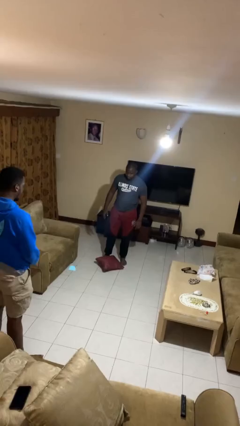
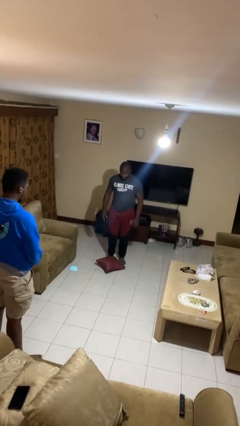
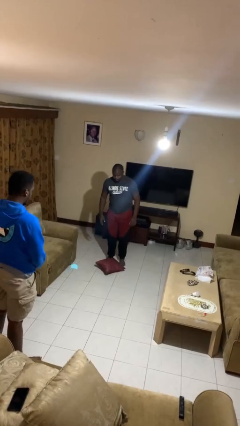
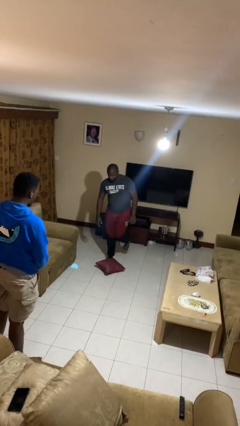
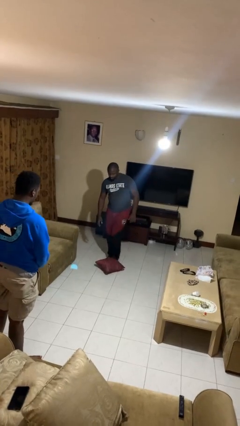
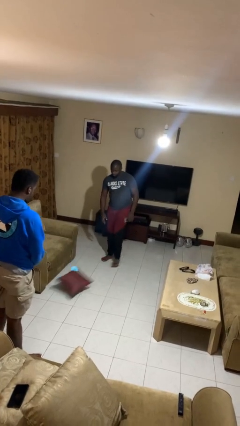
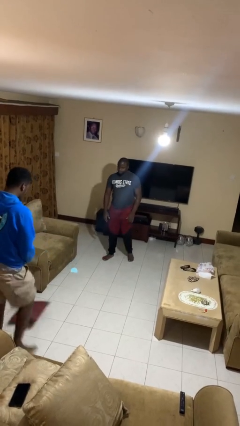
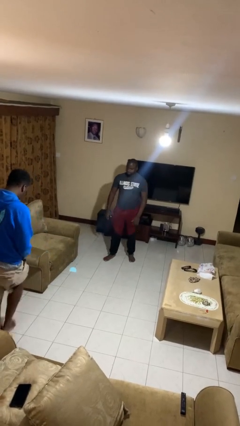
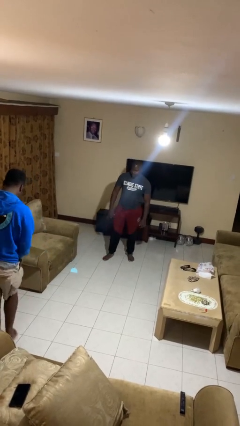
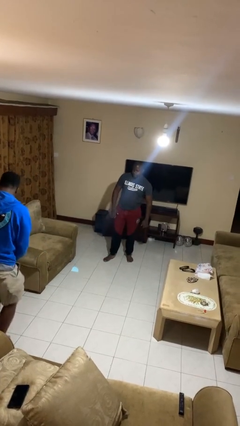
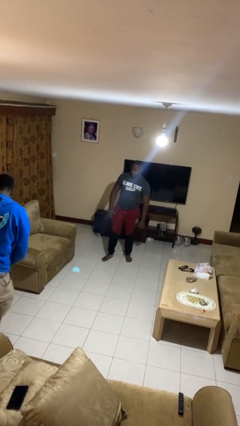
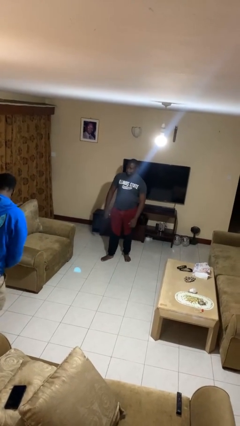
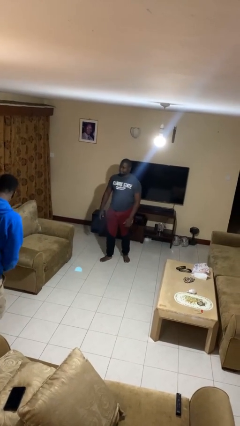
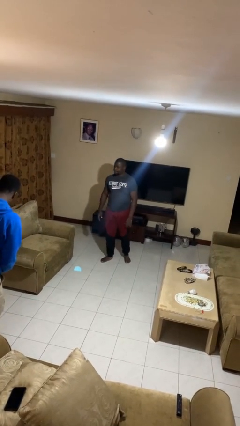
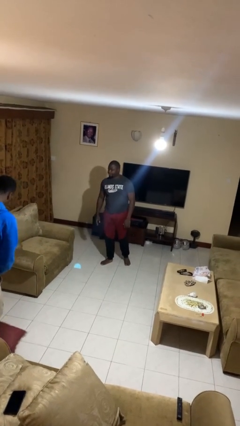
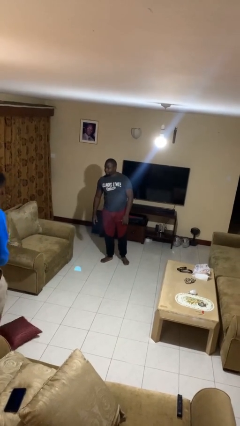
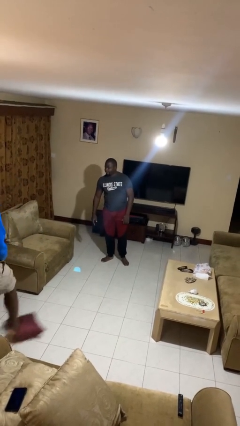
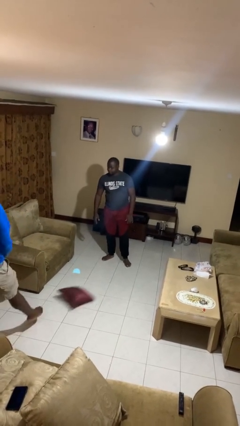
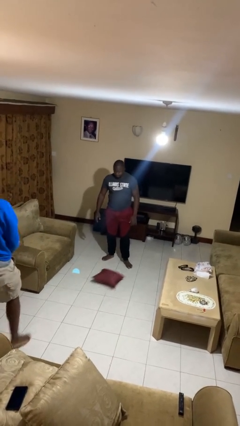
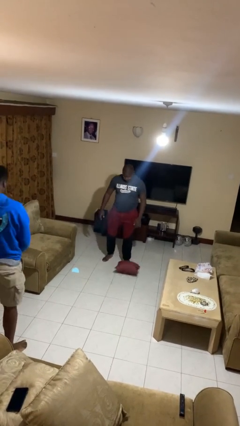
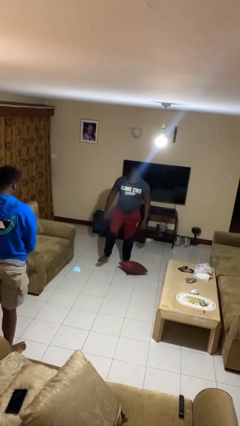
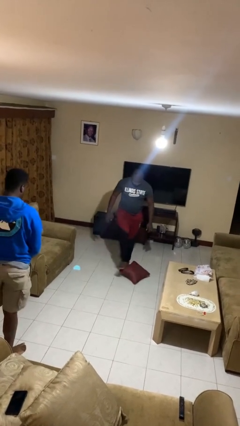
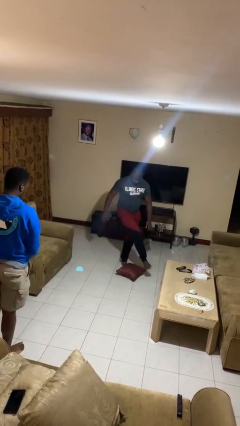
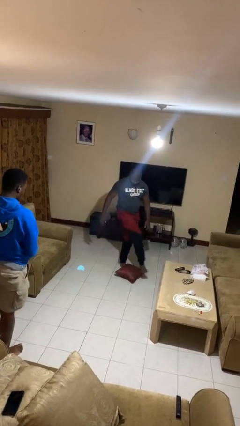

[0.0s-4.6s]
person kicks object to person

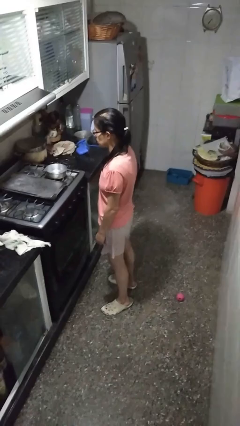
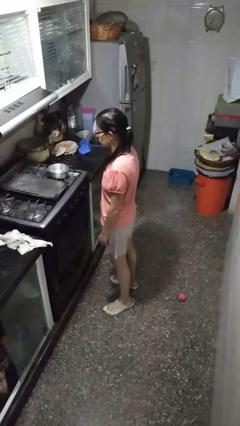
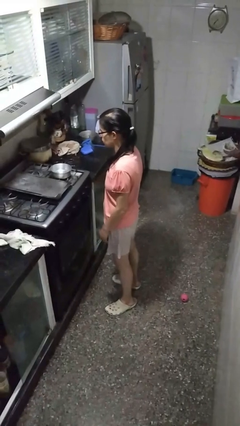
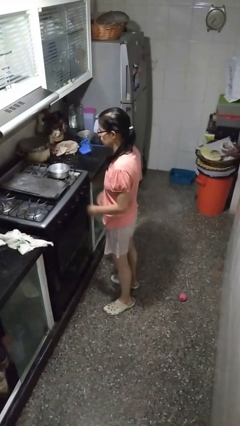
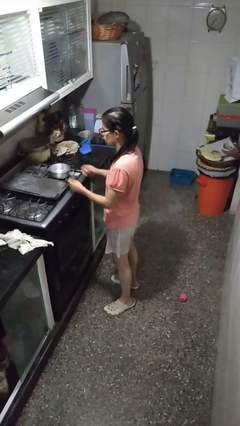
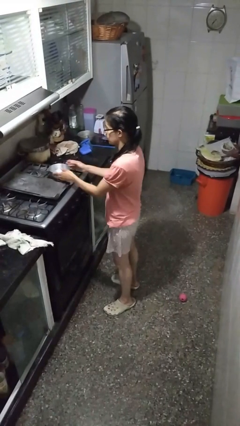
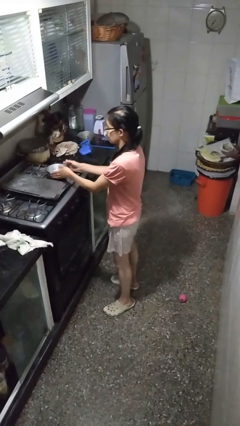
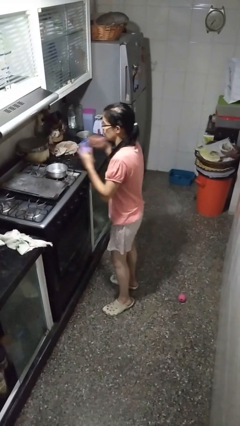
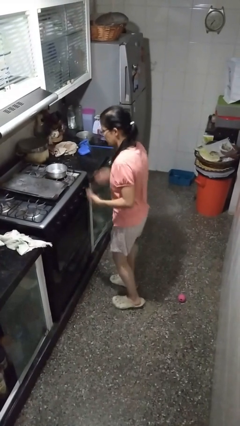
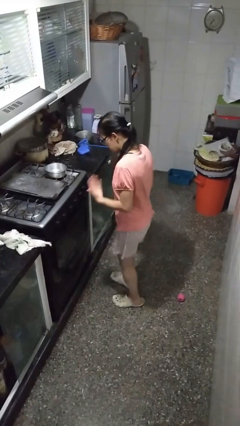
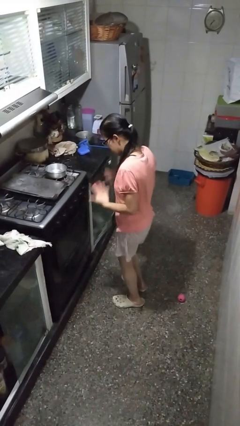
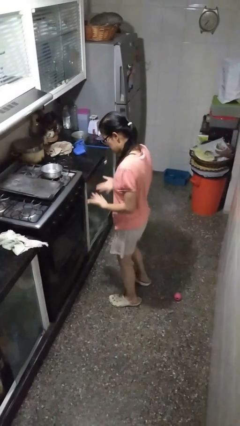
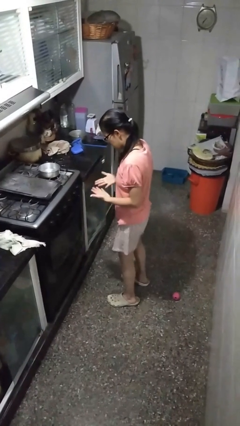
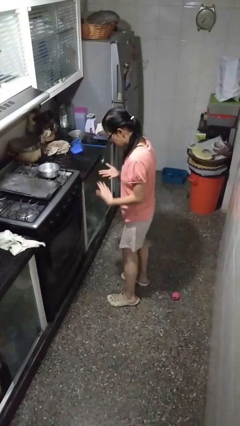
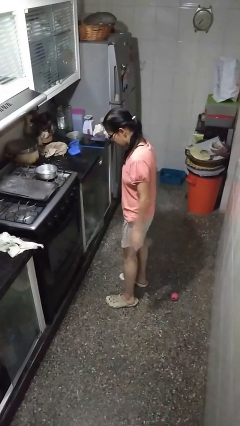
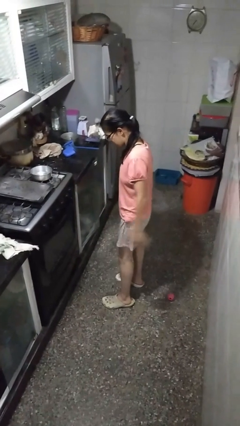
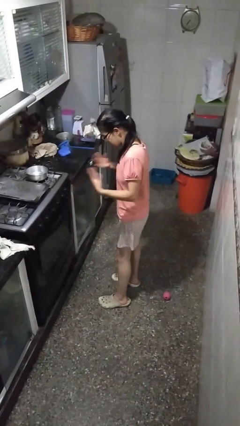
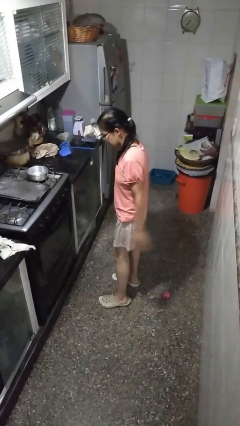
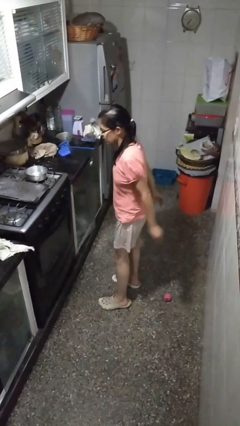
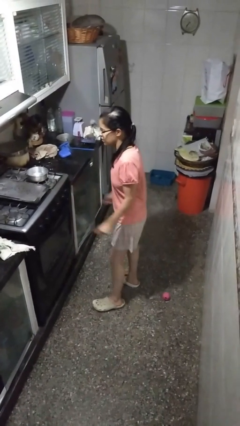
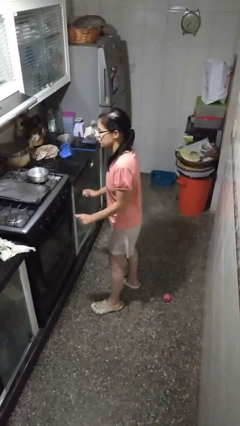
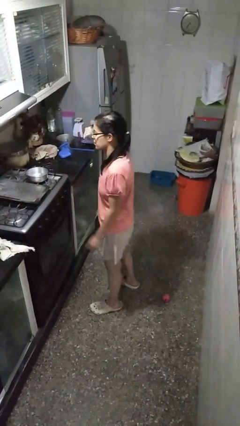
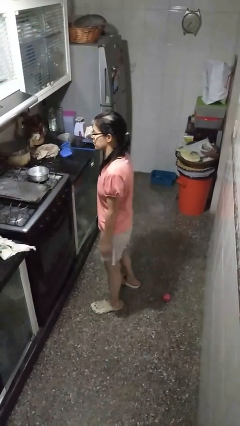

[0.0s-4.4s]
person burns hand

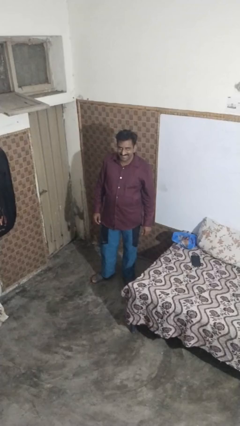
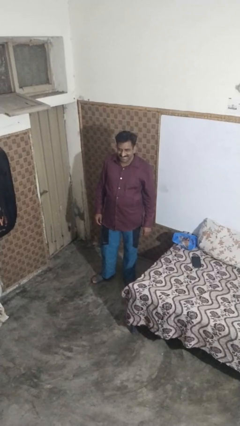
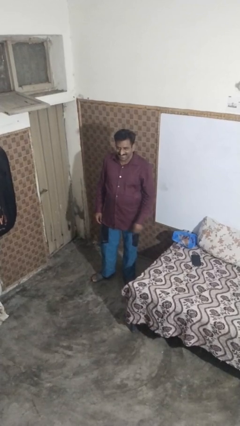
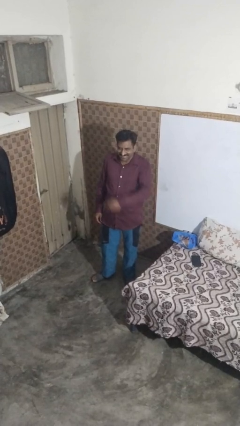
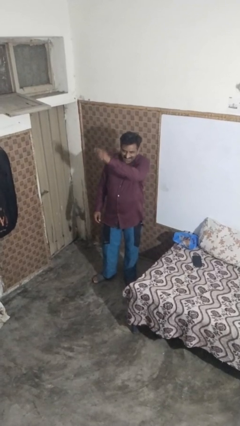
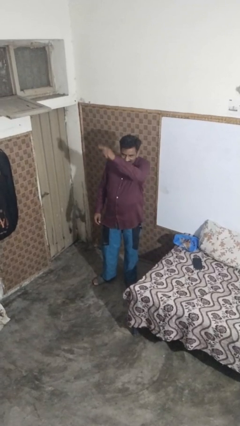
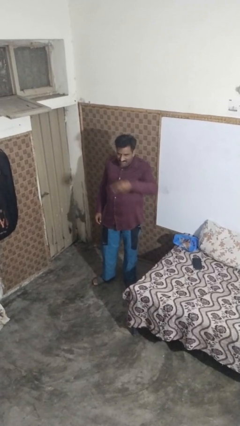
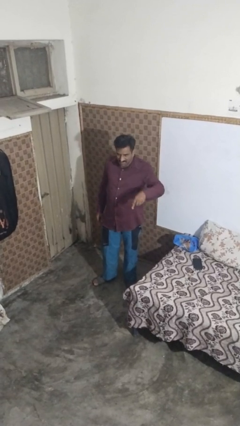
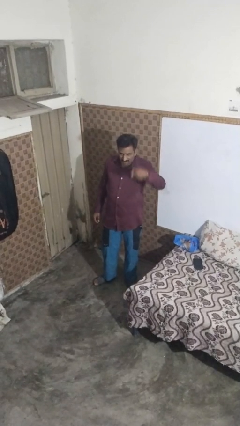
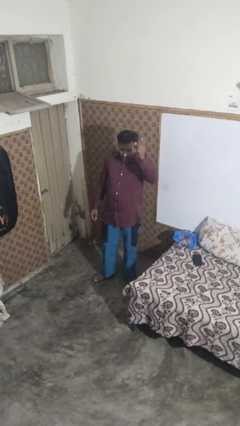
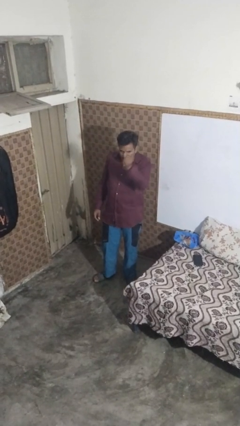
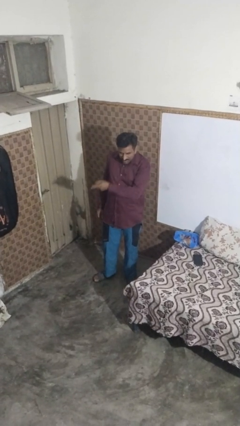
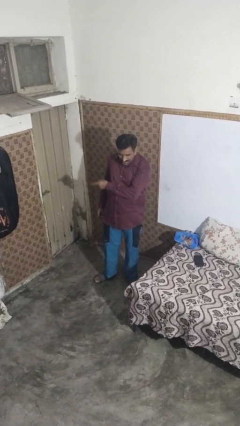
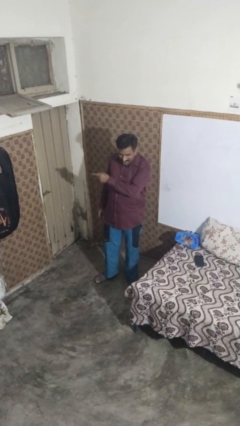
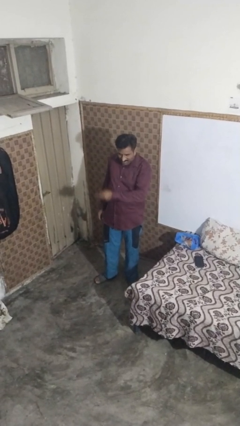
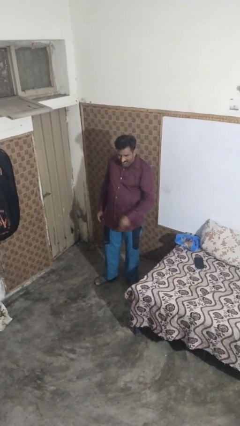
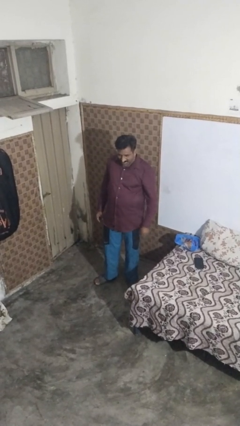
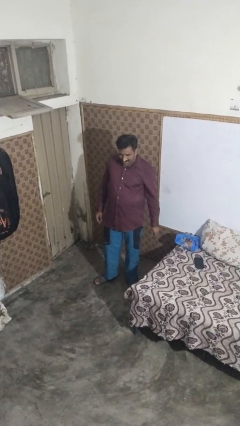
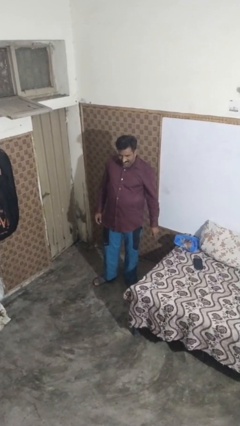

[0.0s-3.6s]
person gestures cut

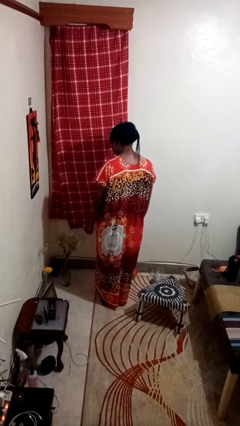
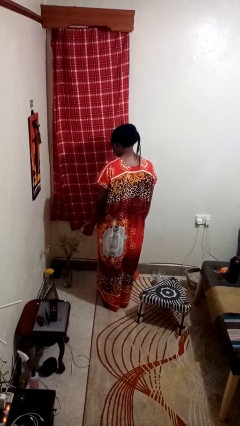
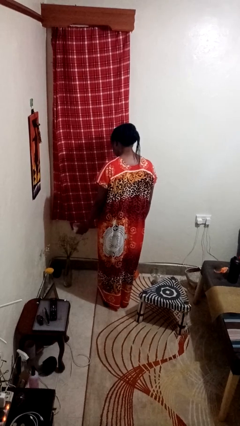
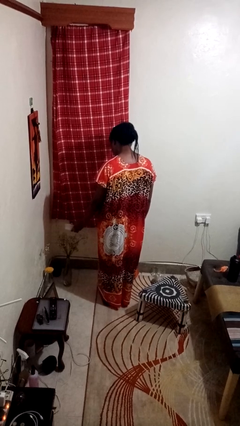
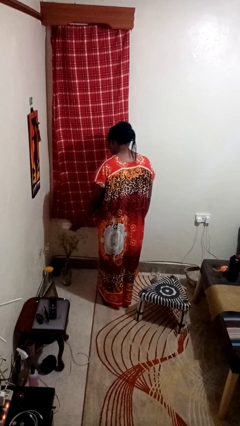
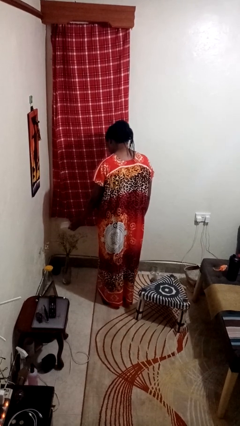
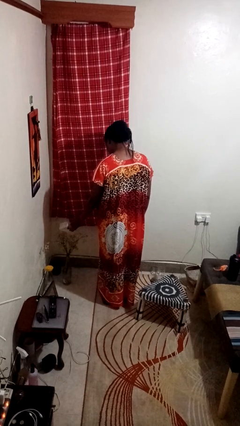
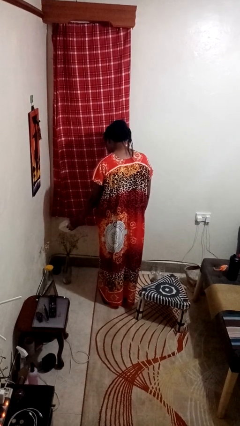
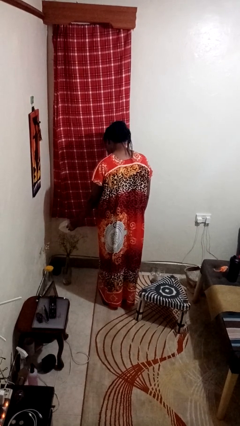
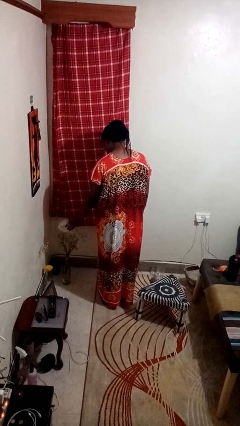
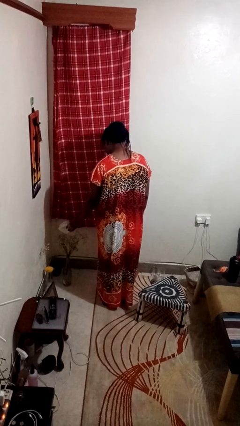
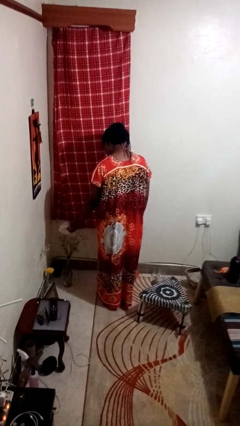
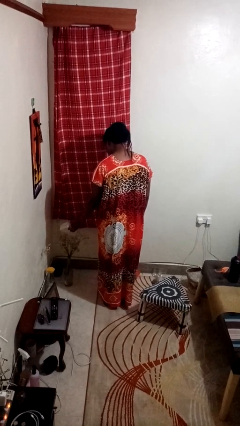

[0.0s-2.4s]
person waters houseplant

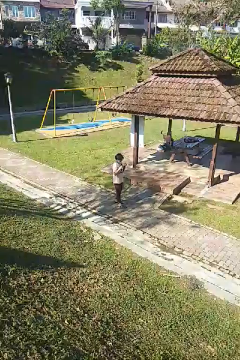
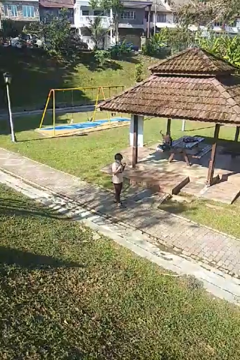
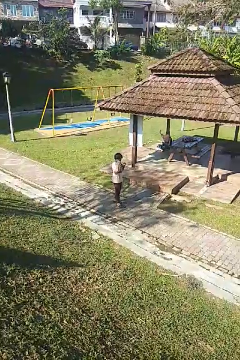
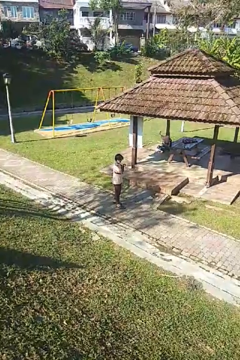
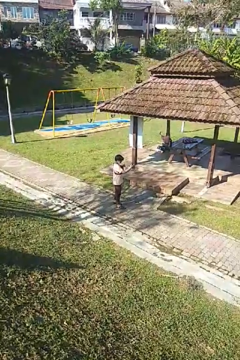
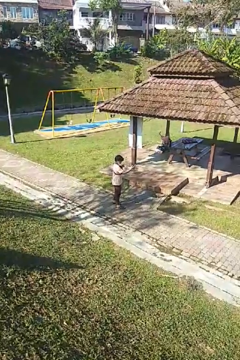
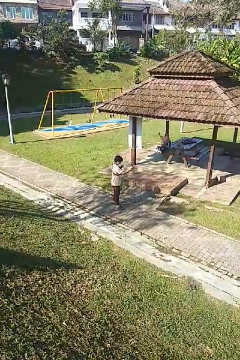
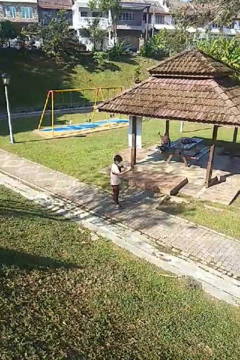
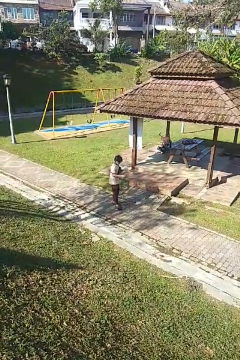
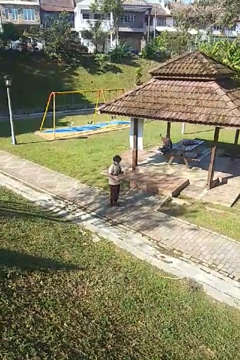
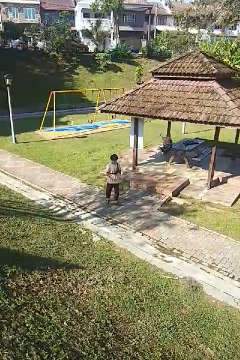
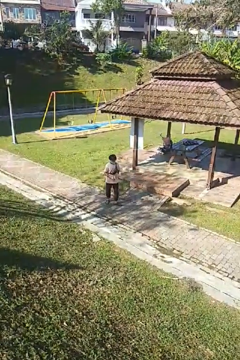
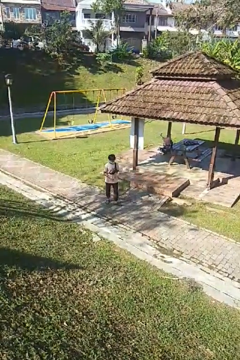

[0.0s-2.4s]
person karate chop

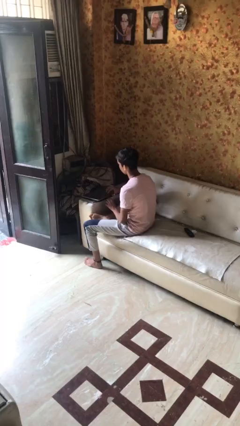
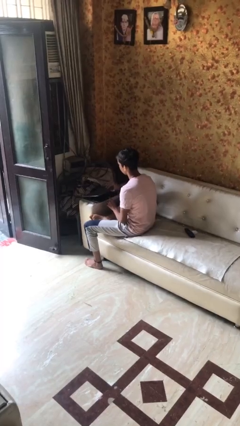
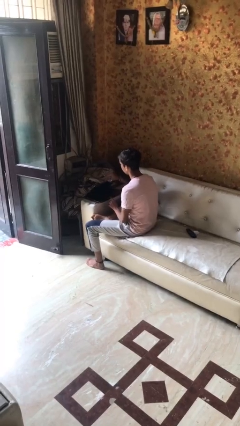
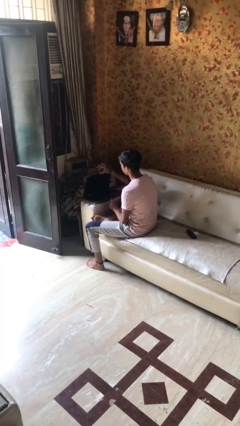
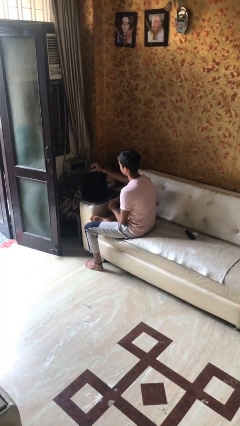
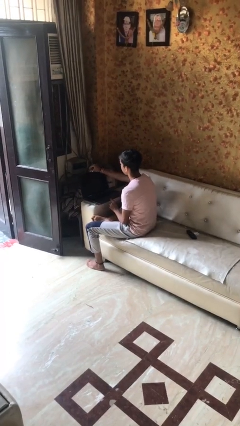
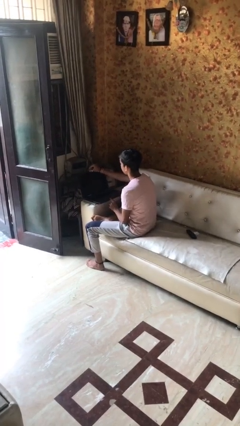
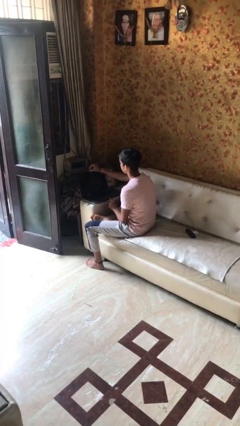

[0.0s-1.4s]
person opens laptop
